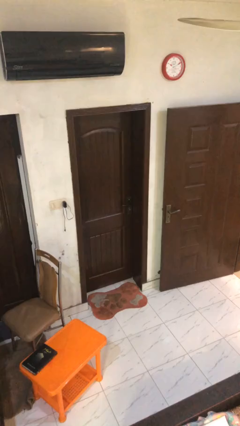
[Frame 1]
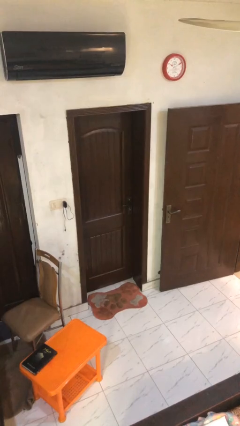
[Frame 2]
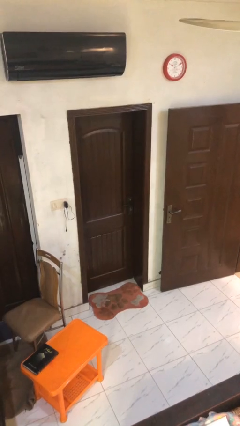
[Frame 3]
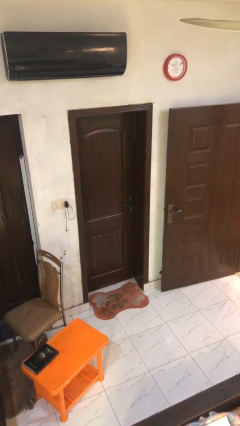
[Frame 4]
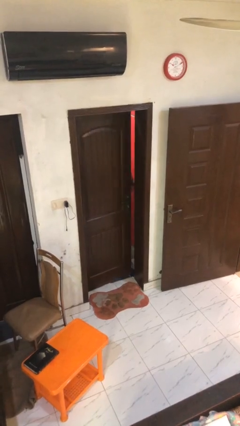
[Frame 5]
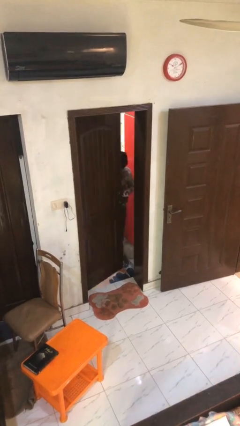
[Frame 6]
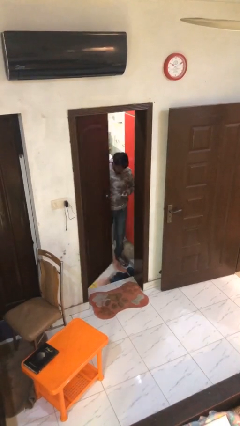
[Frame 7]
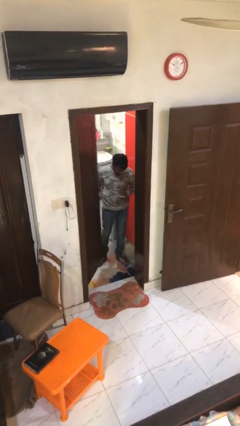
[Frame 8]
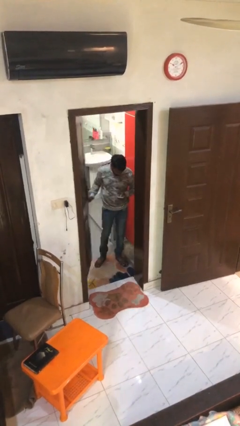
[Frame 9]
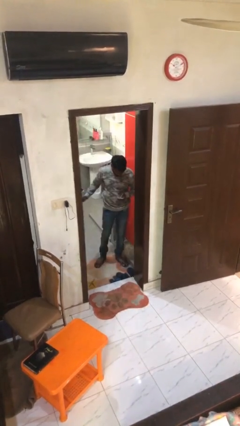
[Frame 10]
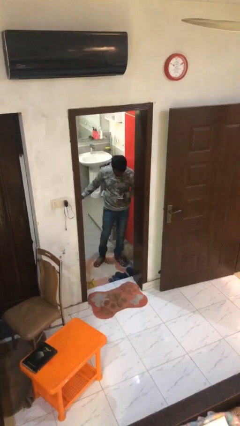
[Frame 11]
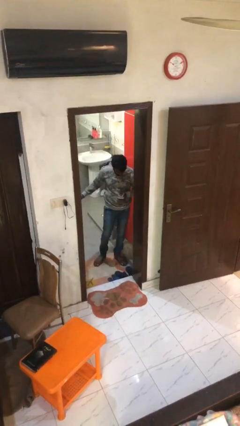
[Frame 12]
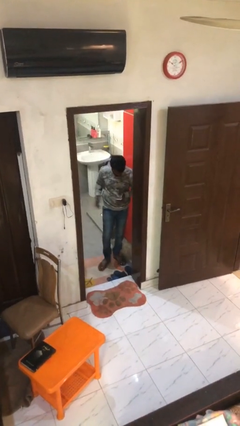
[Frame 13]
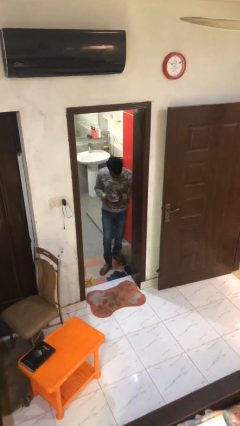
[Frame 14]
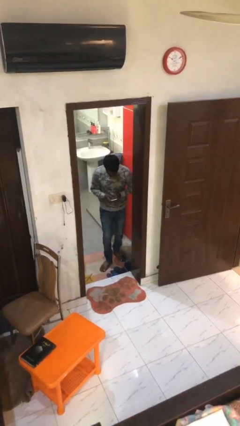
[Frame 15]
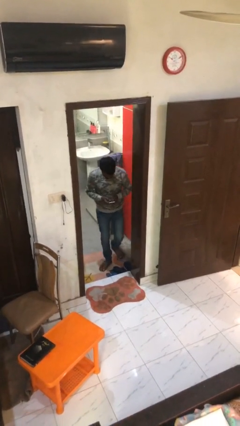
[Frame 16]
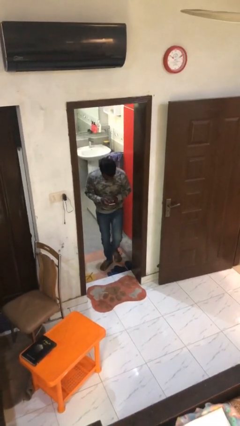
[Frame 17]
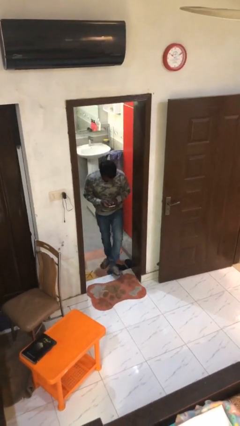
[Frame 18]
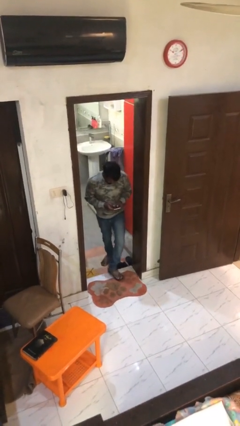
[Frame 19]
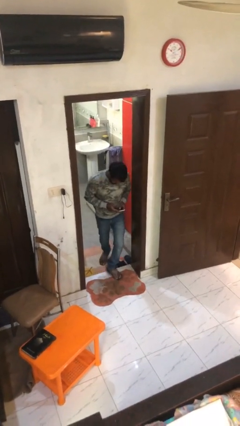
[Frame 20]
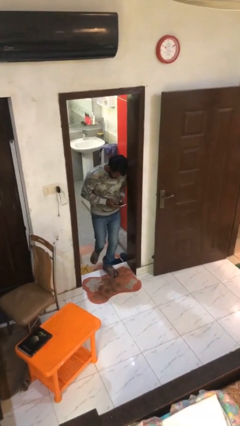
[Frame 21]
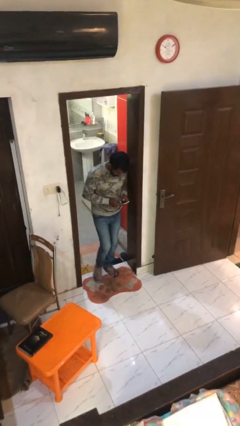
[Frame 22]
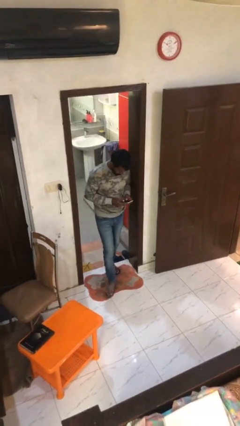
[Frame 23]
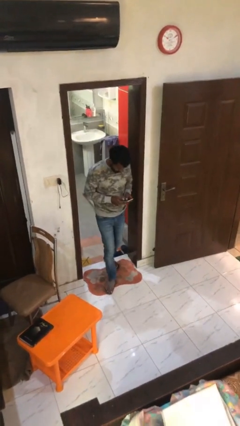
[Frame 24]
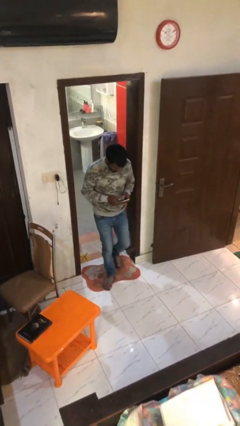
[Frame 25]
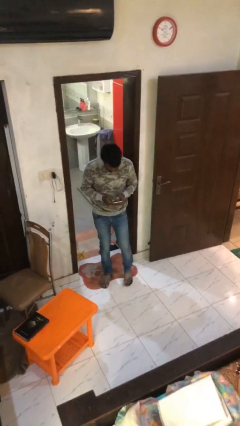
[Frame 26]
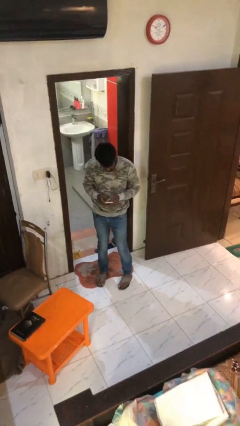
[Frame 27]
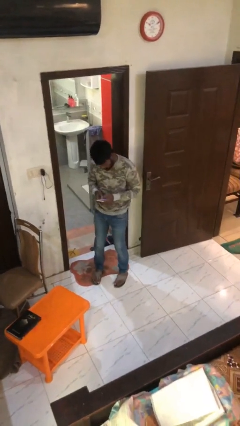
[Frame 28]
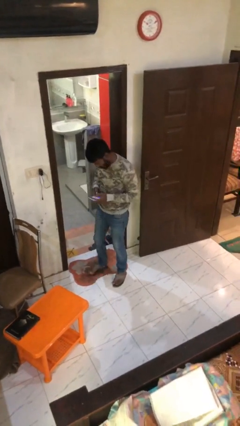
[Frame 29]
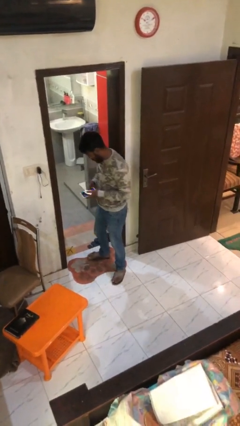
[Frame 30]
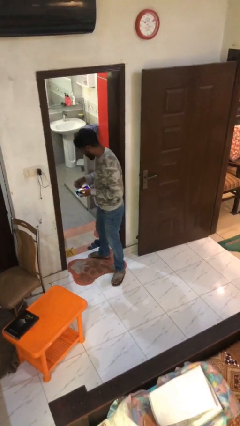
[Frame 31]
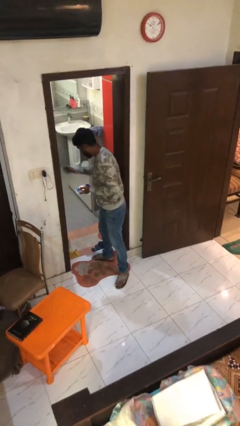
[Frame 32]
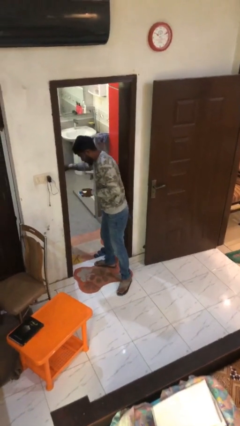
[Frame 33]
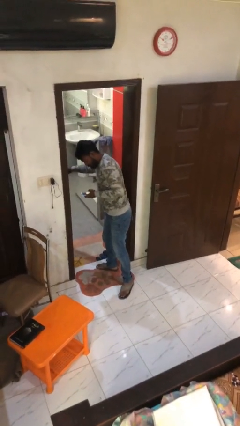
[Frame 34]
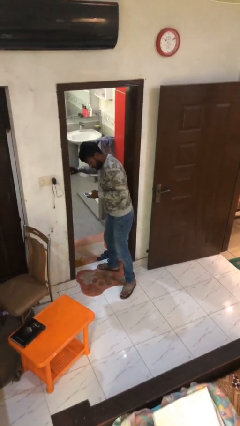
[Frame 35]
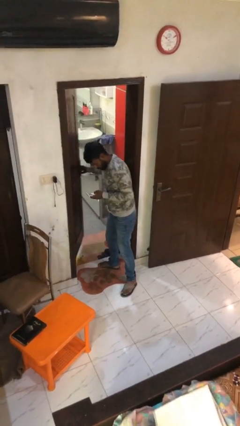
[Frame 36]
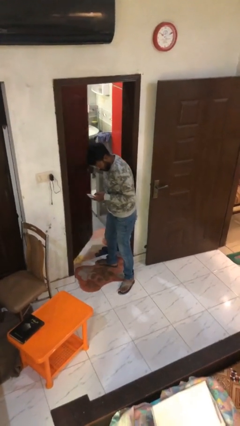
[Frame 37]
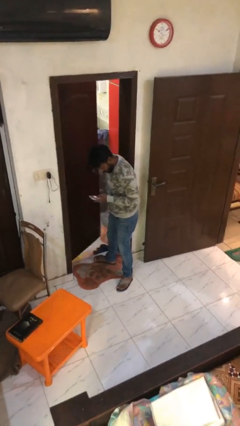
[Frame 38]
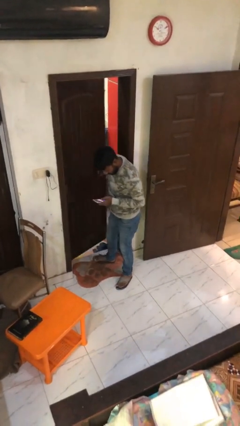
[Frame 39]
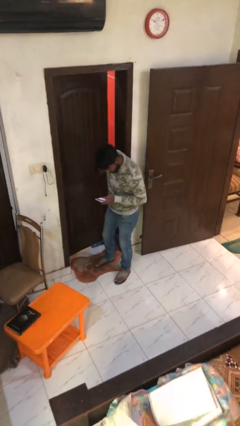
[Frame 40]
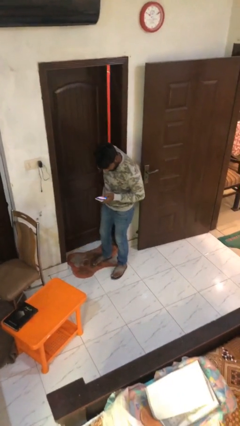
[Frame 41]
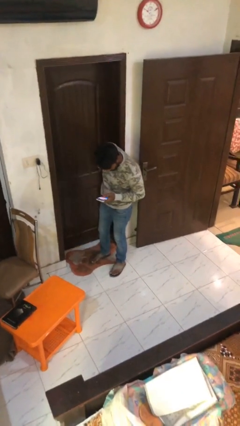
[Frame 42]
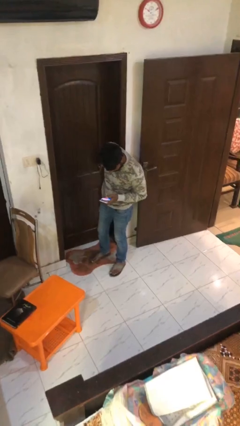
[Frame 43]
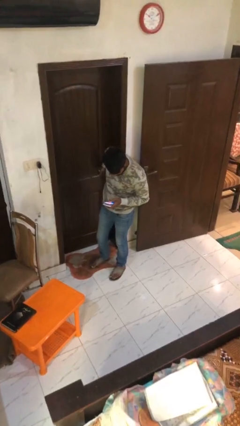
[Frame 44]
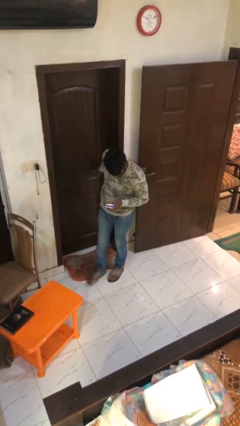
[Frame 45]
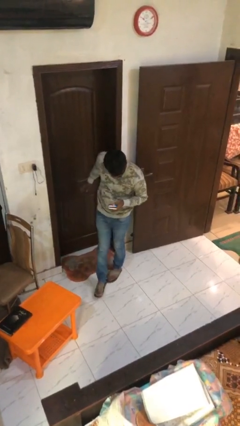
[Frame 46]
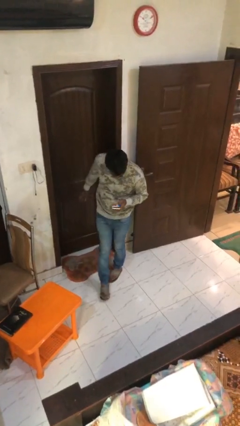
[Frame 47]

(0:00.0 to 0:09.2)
person texts on phone

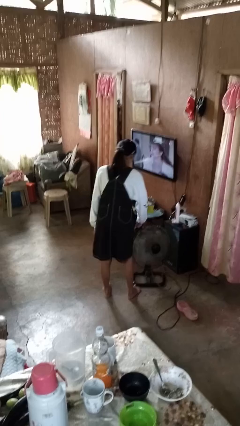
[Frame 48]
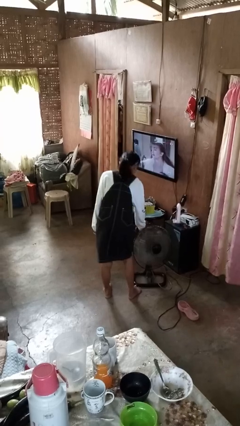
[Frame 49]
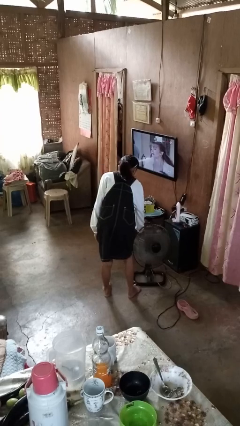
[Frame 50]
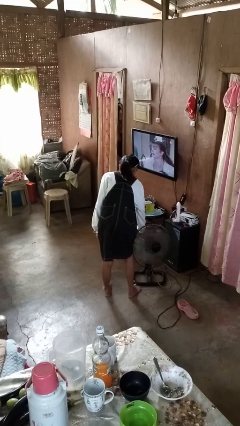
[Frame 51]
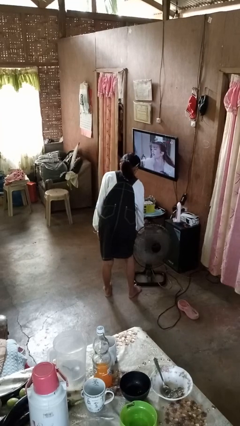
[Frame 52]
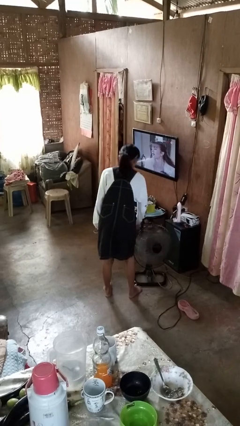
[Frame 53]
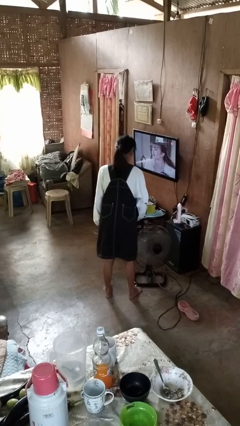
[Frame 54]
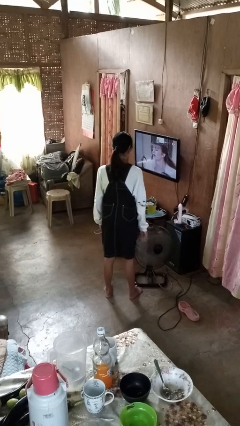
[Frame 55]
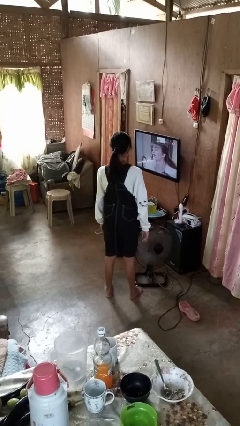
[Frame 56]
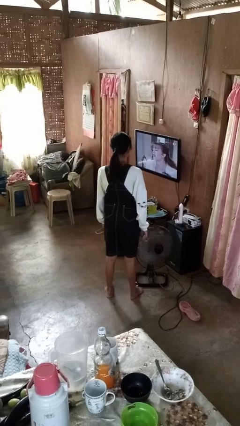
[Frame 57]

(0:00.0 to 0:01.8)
person turns off fan

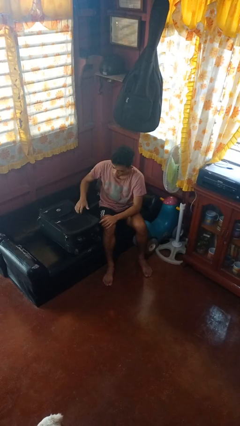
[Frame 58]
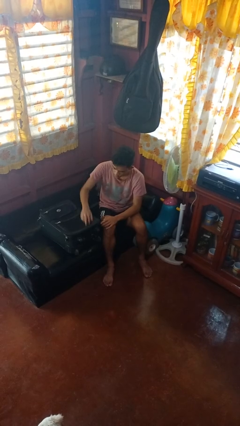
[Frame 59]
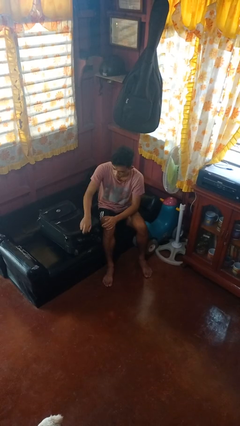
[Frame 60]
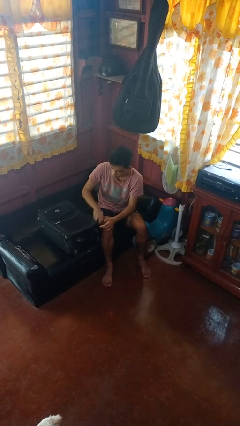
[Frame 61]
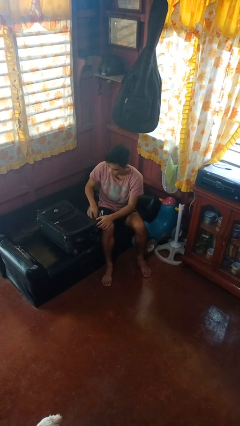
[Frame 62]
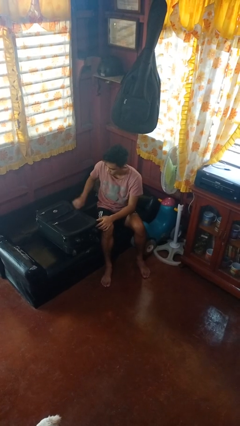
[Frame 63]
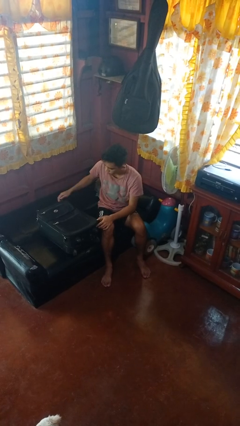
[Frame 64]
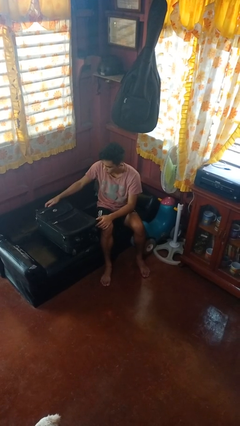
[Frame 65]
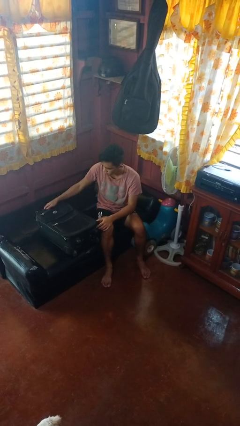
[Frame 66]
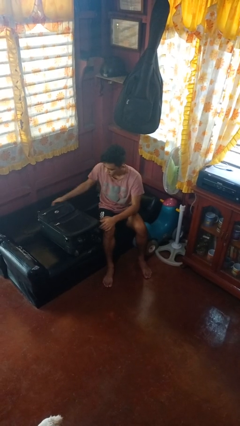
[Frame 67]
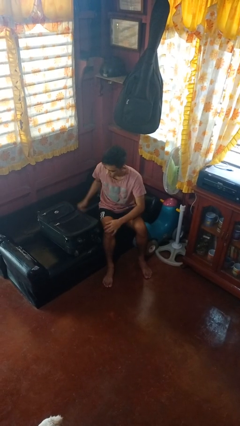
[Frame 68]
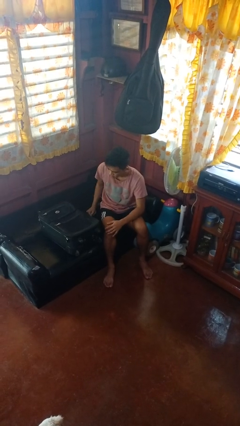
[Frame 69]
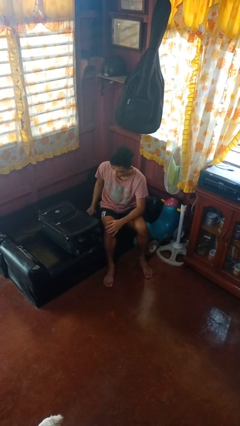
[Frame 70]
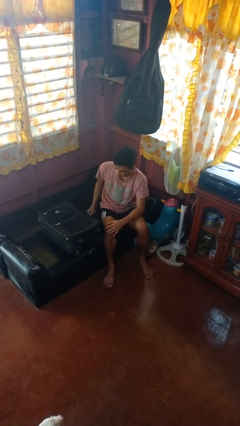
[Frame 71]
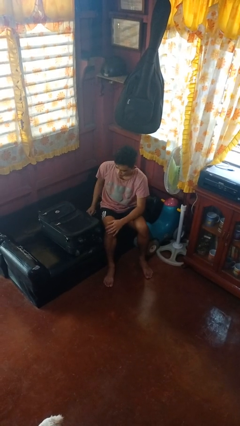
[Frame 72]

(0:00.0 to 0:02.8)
person closes suitcase

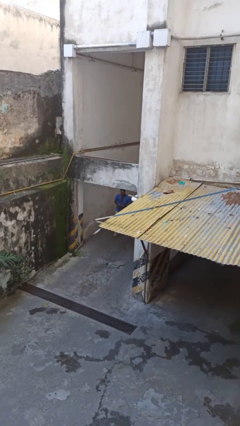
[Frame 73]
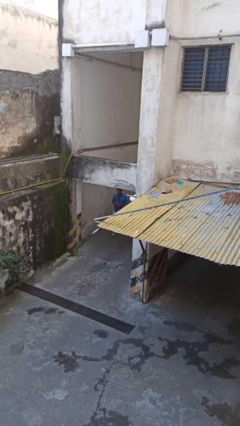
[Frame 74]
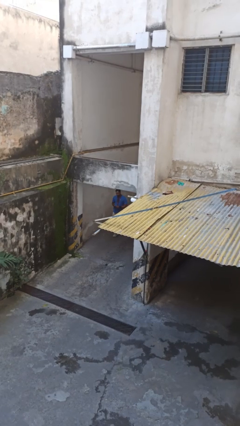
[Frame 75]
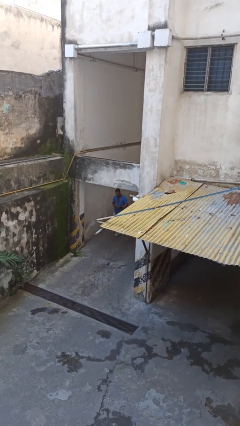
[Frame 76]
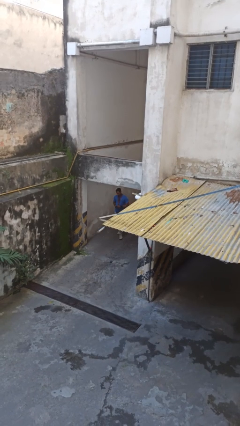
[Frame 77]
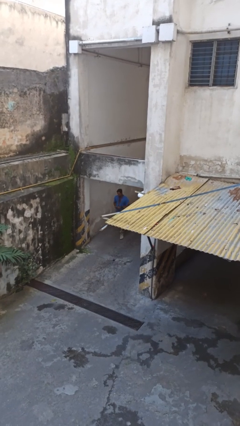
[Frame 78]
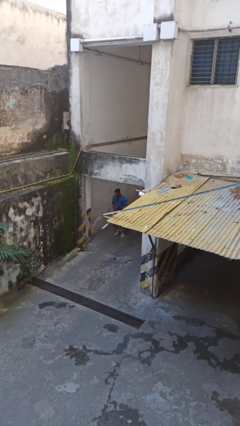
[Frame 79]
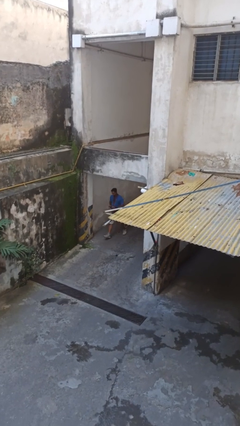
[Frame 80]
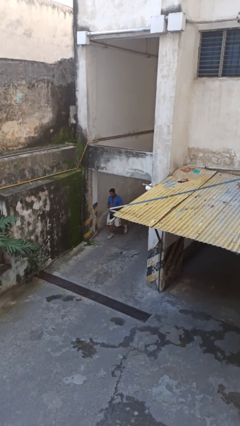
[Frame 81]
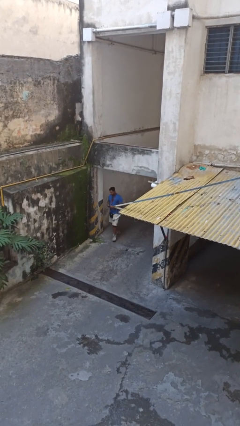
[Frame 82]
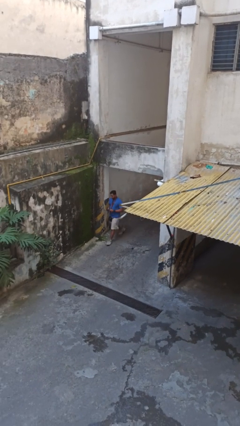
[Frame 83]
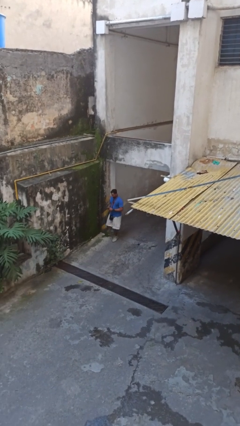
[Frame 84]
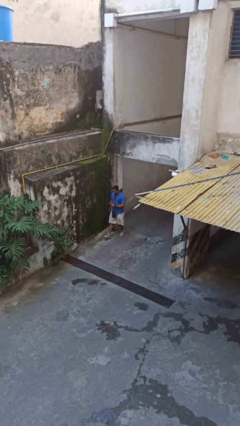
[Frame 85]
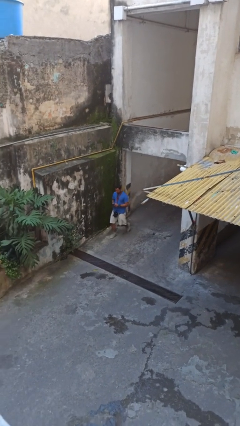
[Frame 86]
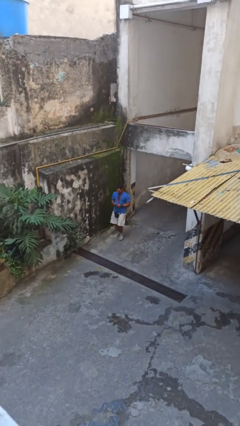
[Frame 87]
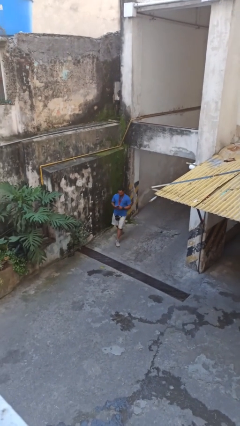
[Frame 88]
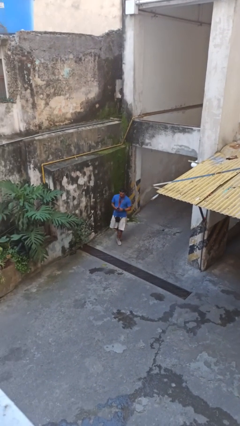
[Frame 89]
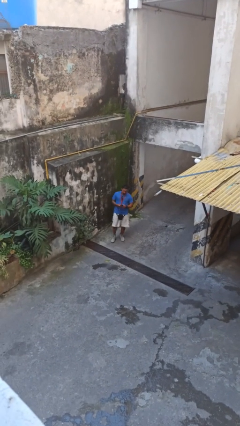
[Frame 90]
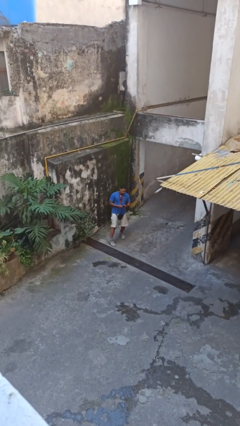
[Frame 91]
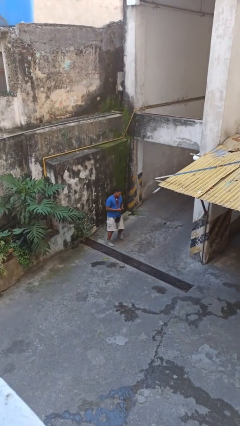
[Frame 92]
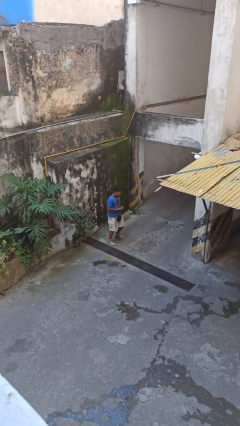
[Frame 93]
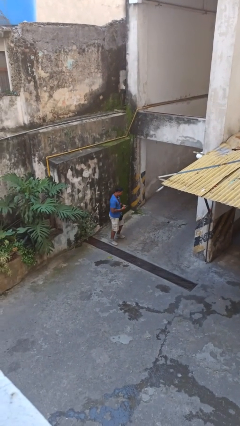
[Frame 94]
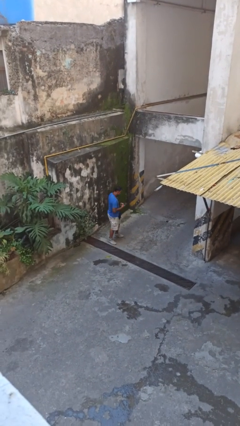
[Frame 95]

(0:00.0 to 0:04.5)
person enters scene through structure
